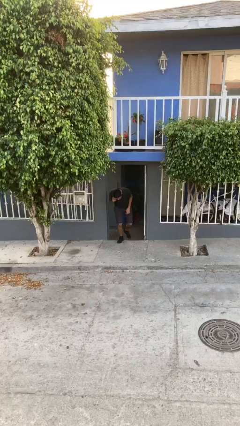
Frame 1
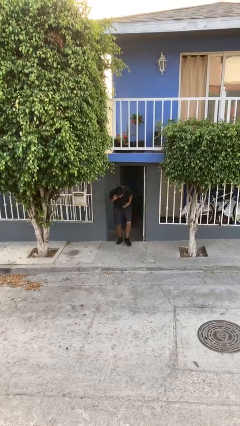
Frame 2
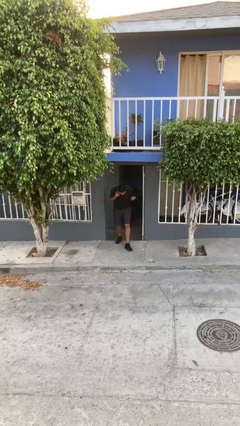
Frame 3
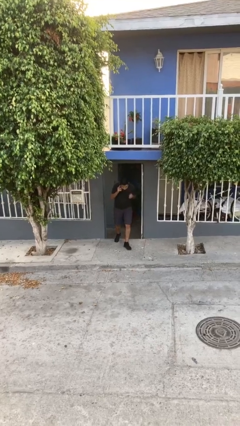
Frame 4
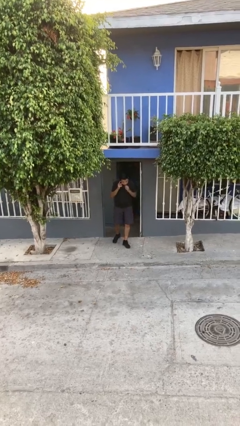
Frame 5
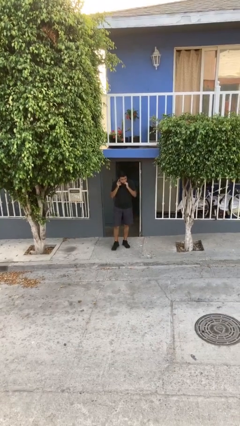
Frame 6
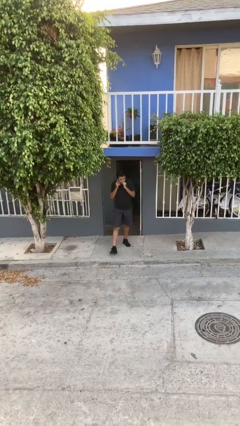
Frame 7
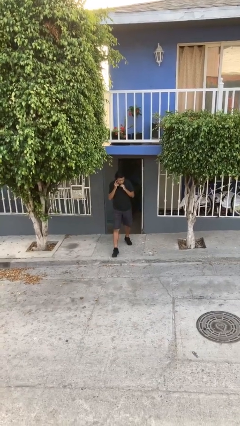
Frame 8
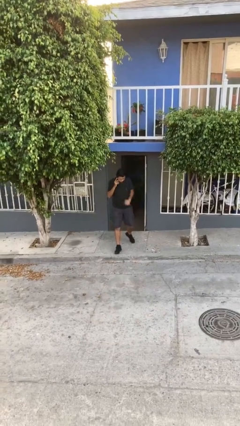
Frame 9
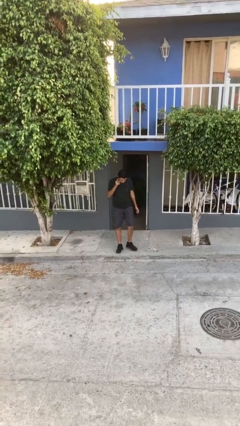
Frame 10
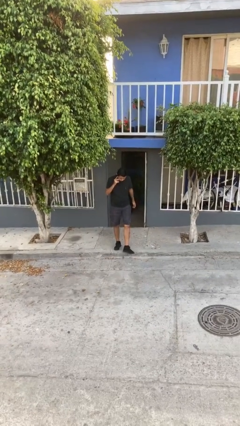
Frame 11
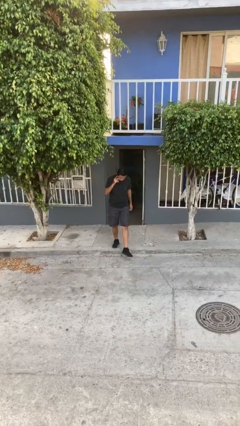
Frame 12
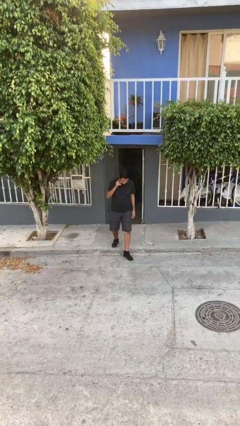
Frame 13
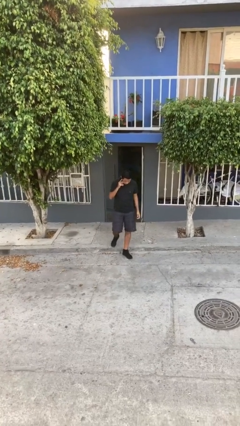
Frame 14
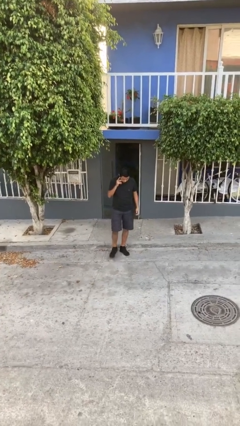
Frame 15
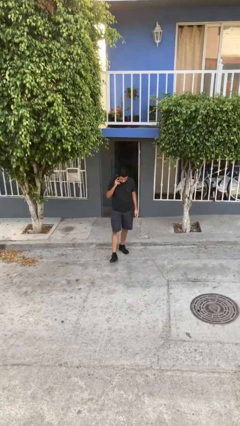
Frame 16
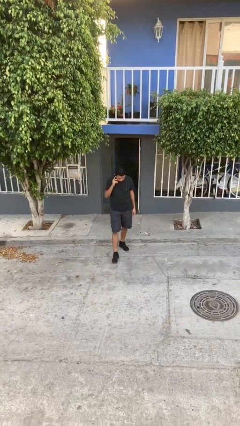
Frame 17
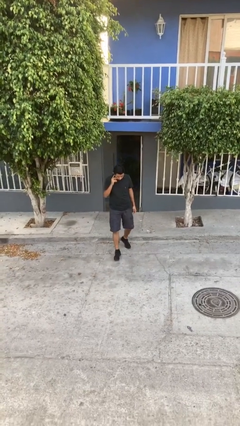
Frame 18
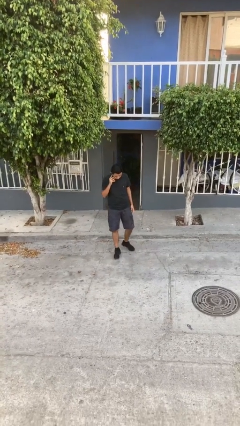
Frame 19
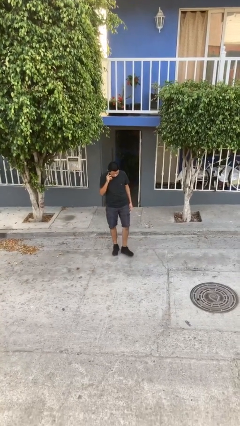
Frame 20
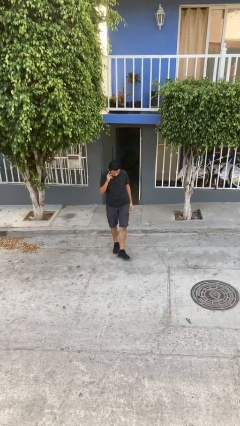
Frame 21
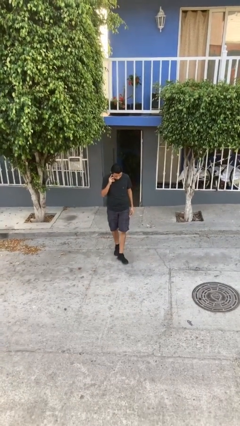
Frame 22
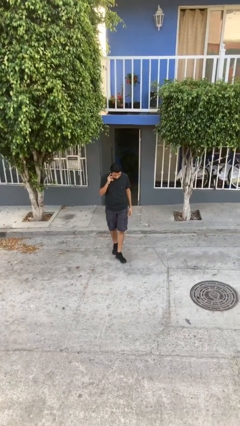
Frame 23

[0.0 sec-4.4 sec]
person enters scene through structure

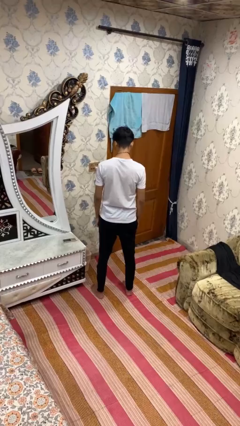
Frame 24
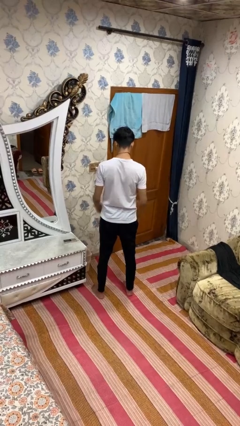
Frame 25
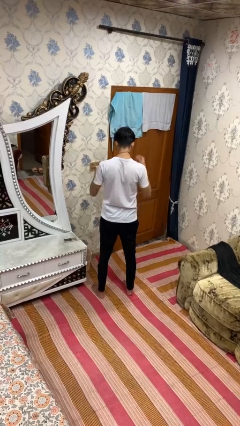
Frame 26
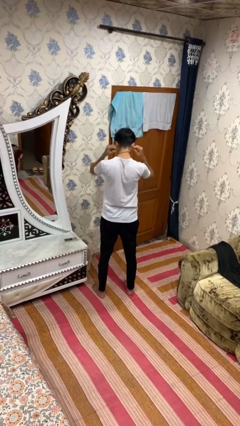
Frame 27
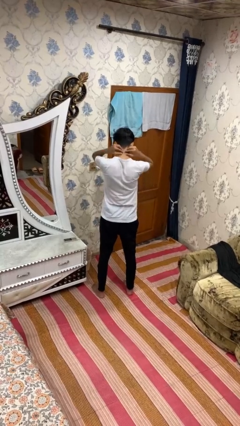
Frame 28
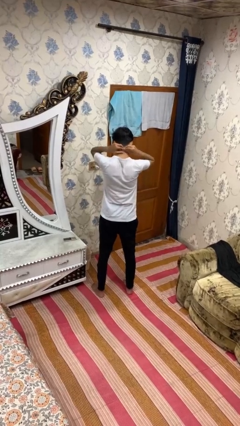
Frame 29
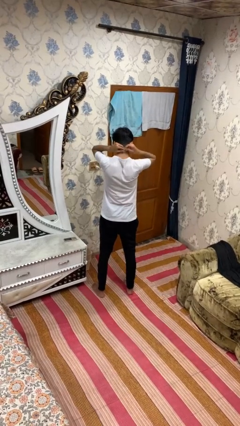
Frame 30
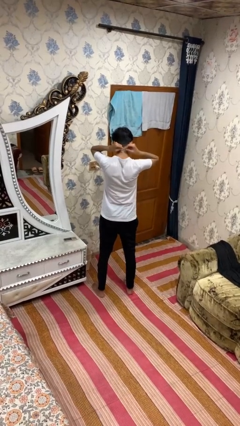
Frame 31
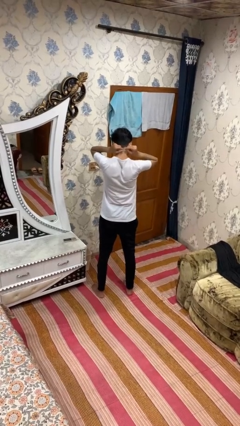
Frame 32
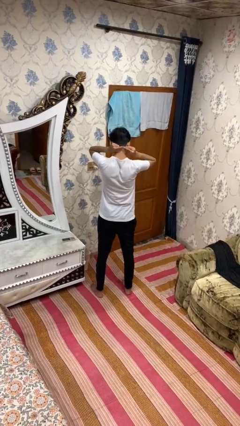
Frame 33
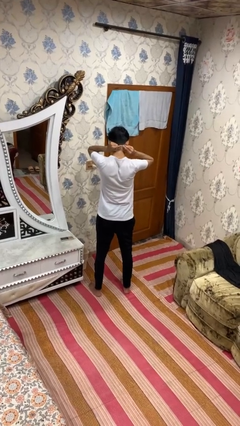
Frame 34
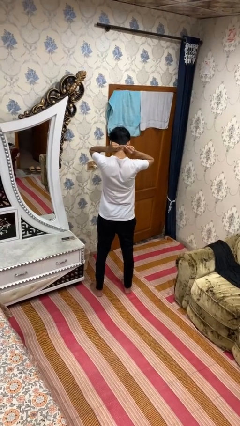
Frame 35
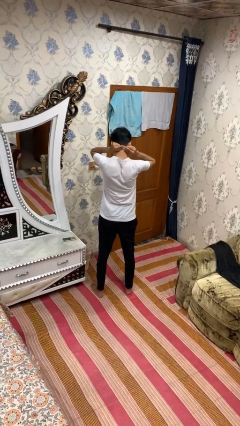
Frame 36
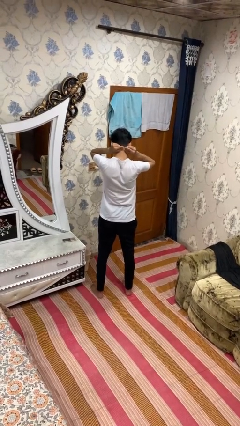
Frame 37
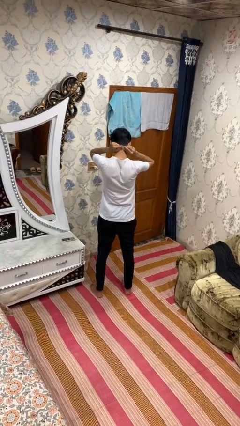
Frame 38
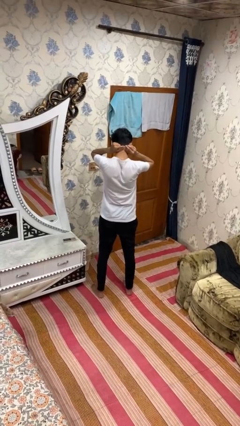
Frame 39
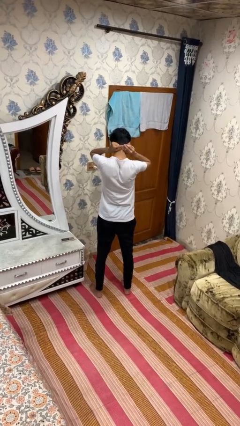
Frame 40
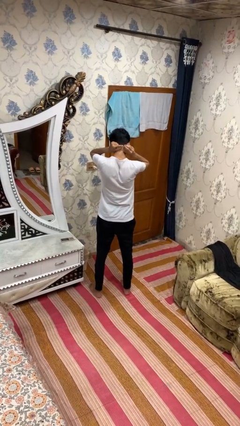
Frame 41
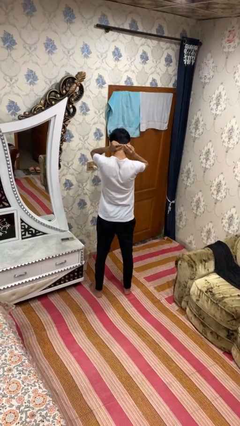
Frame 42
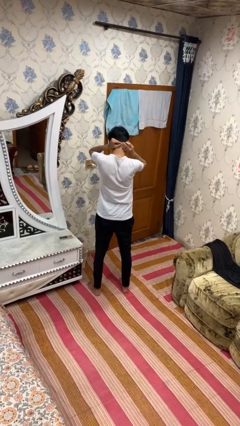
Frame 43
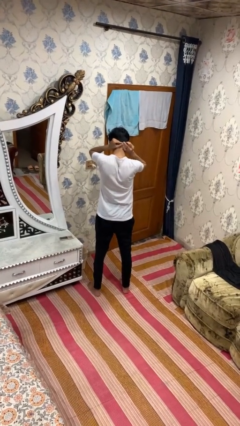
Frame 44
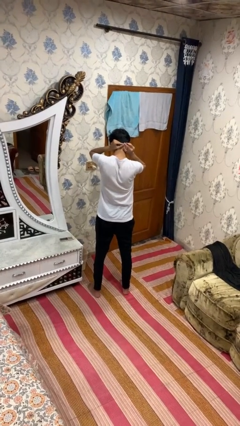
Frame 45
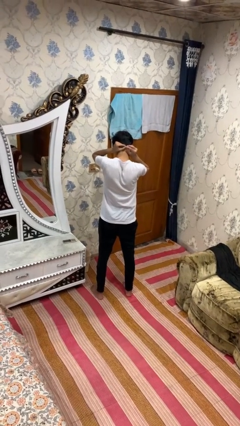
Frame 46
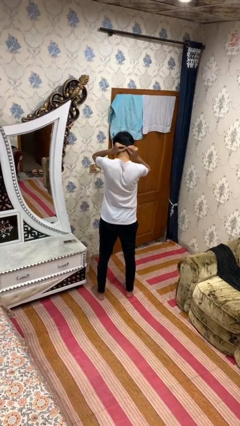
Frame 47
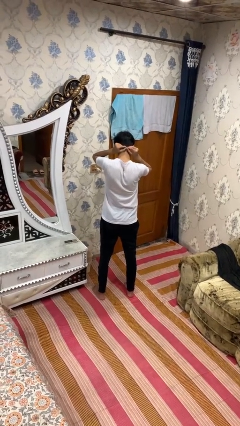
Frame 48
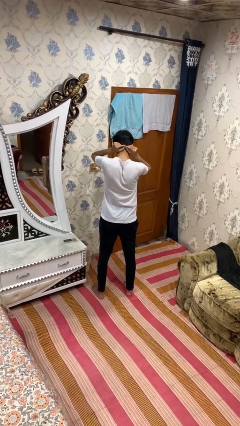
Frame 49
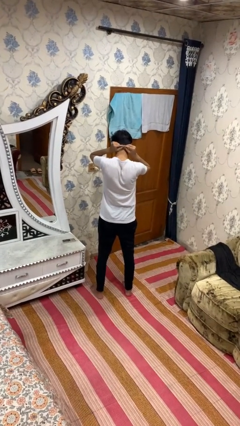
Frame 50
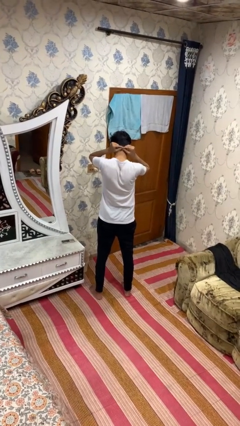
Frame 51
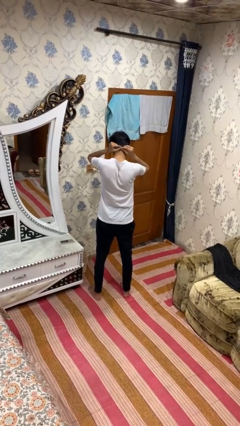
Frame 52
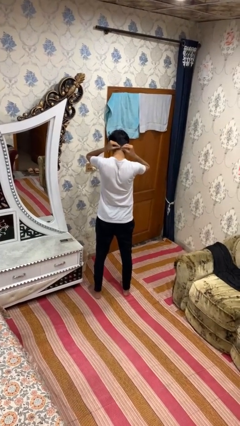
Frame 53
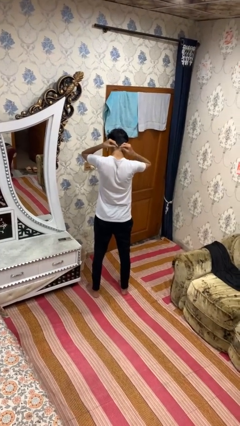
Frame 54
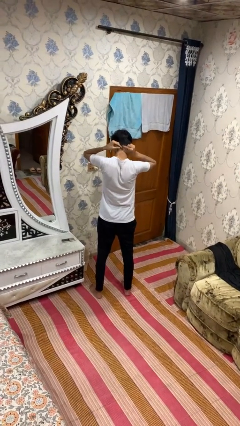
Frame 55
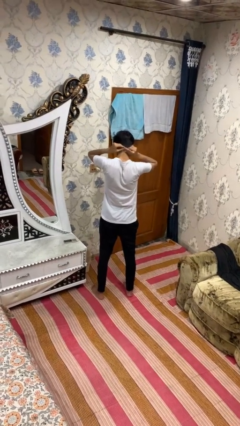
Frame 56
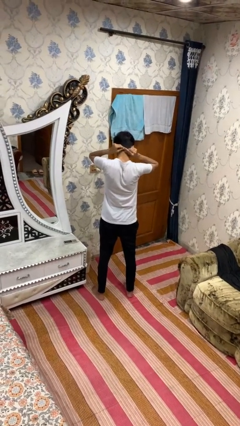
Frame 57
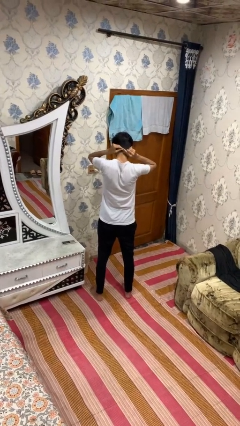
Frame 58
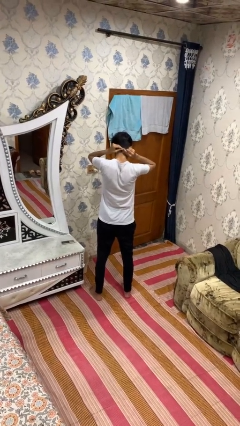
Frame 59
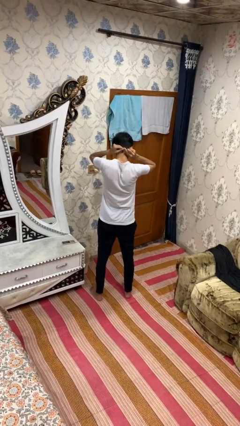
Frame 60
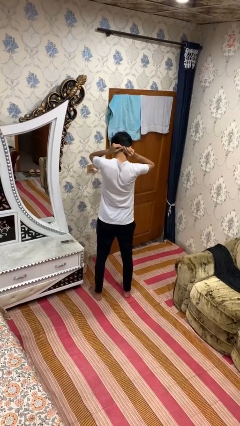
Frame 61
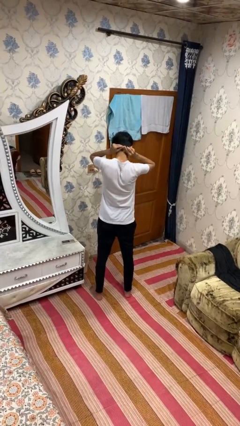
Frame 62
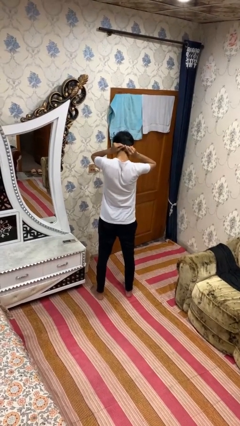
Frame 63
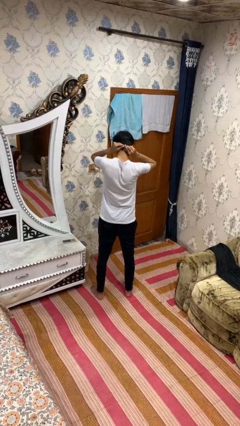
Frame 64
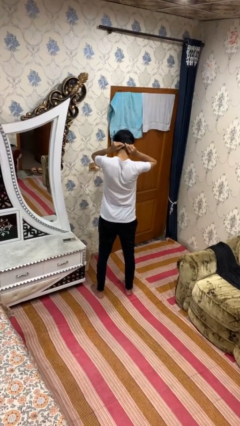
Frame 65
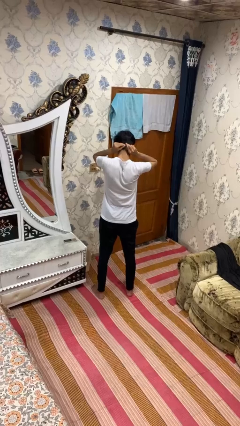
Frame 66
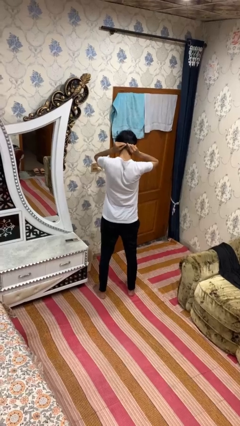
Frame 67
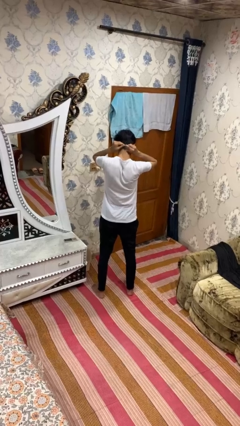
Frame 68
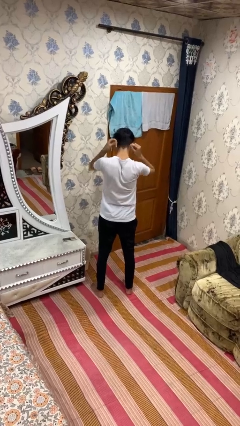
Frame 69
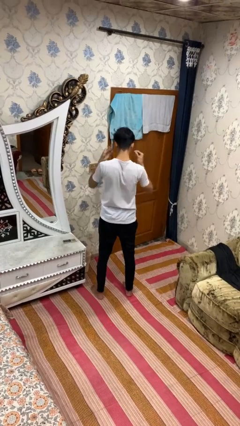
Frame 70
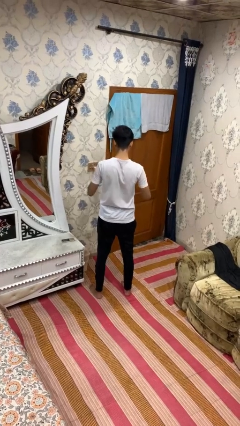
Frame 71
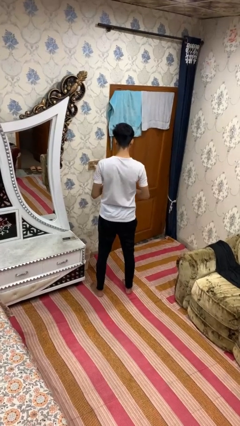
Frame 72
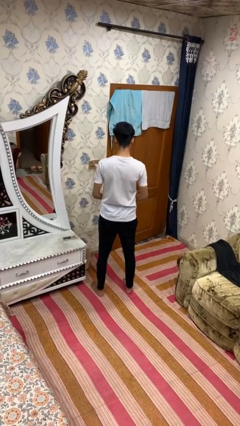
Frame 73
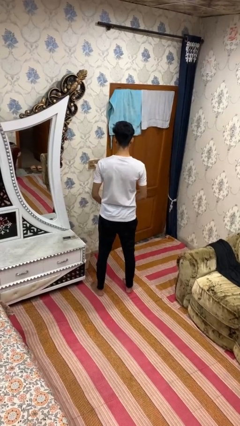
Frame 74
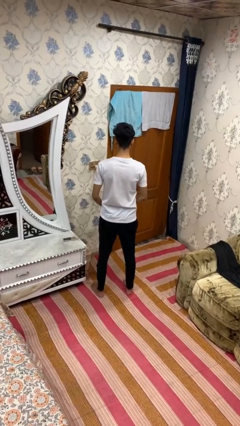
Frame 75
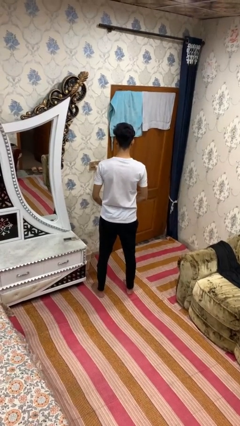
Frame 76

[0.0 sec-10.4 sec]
person takes off necklace

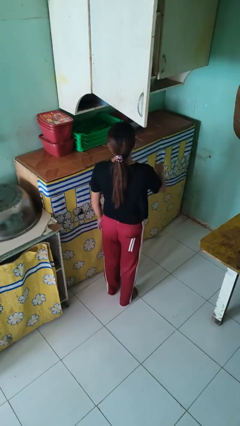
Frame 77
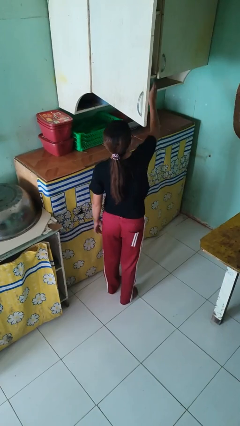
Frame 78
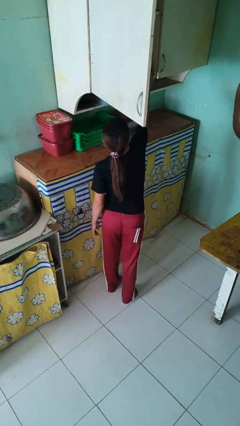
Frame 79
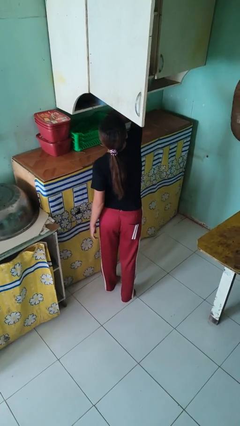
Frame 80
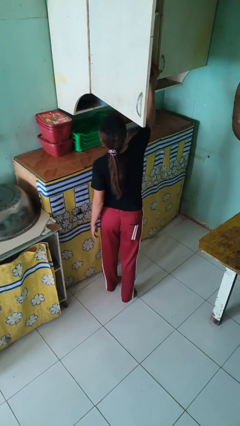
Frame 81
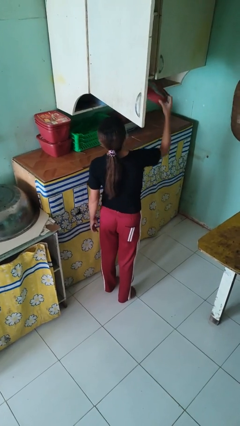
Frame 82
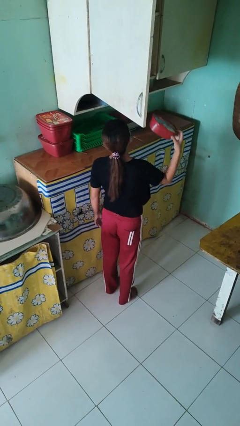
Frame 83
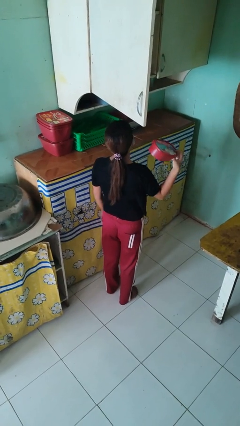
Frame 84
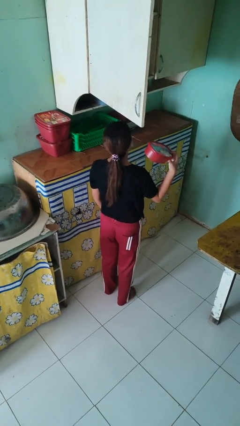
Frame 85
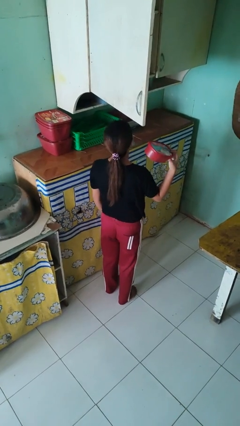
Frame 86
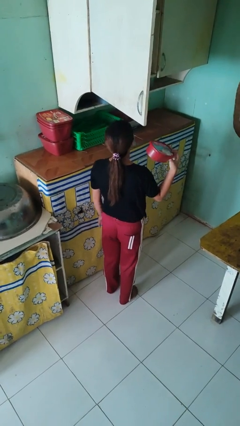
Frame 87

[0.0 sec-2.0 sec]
person takes object from cabinet

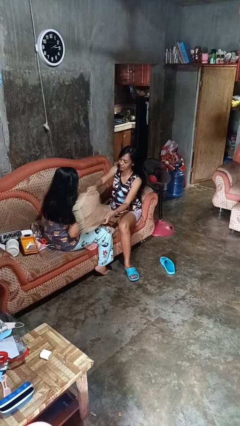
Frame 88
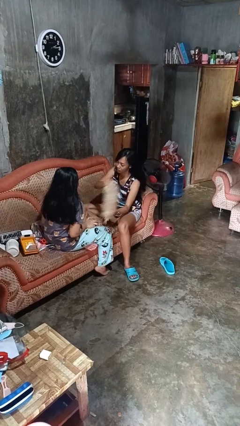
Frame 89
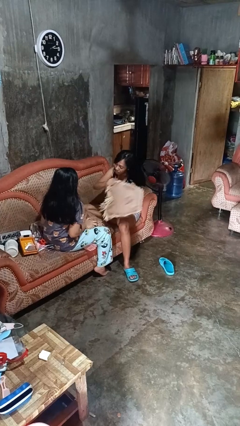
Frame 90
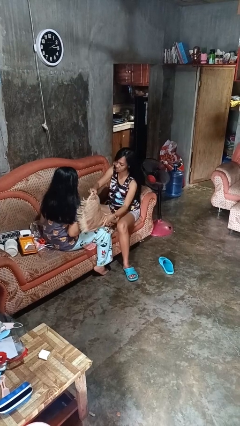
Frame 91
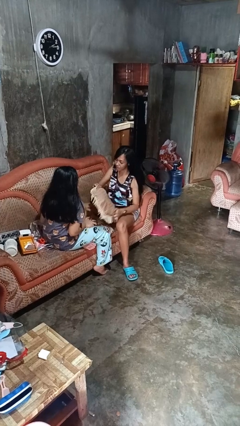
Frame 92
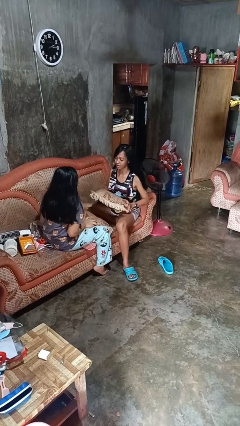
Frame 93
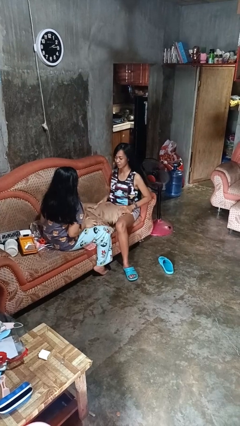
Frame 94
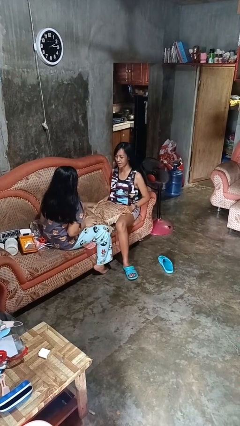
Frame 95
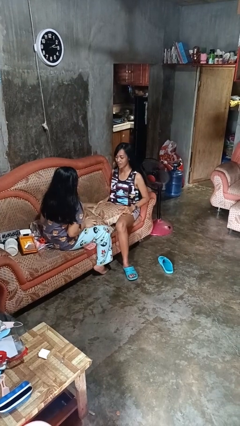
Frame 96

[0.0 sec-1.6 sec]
person hits person with pillow
